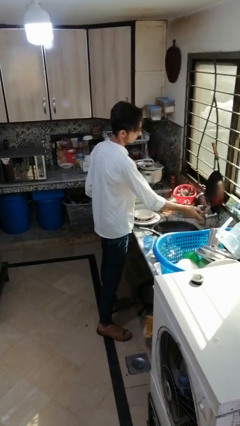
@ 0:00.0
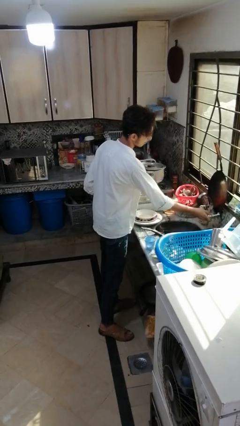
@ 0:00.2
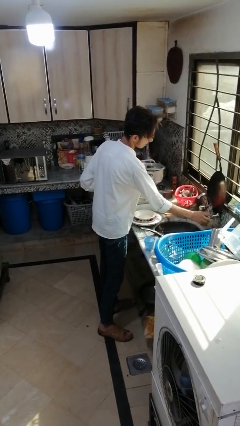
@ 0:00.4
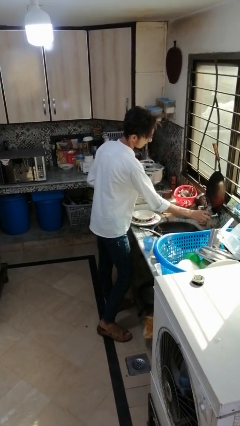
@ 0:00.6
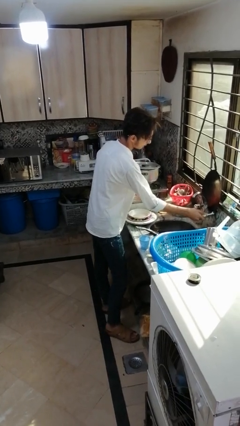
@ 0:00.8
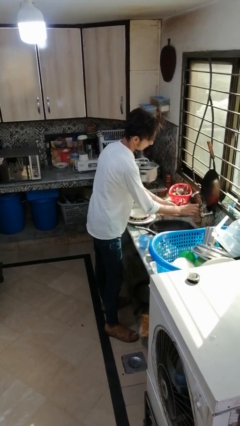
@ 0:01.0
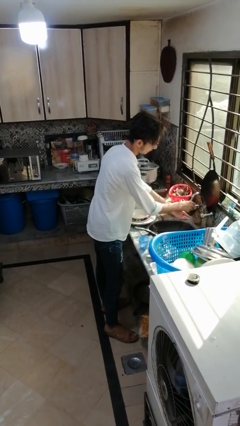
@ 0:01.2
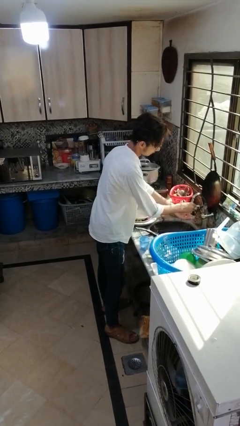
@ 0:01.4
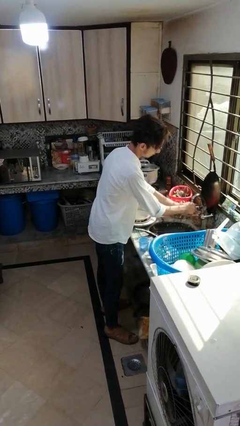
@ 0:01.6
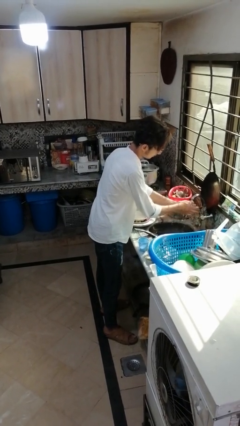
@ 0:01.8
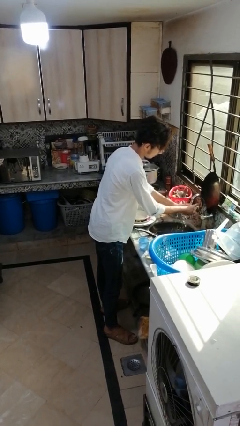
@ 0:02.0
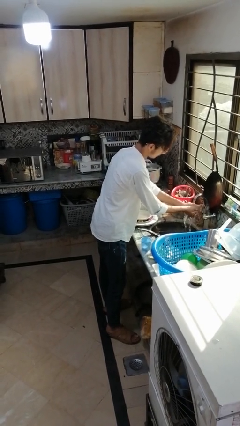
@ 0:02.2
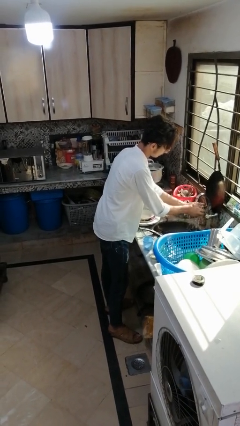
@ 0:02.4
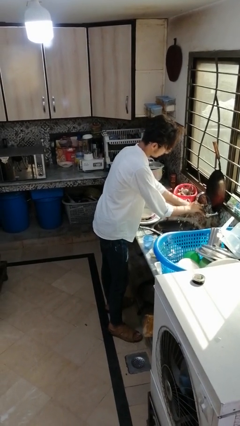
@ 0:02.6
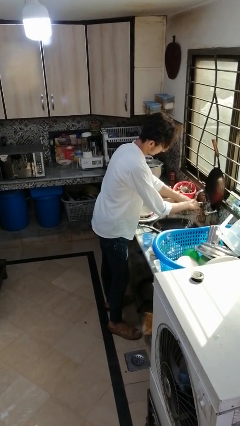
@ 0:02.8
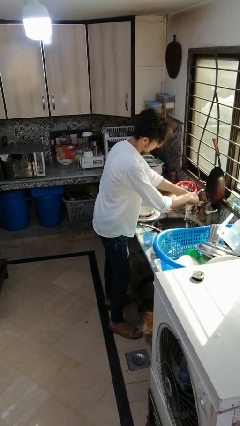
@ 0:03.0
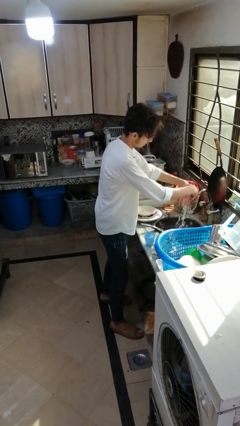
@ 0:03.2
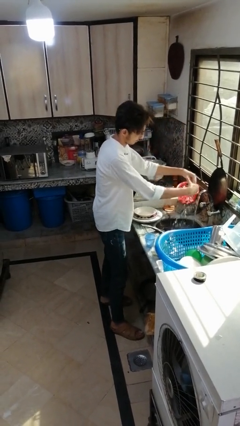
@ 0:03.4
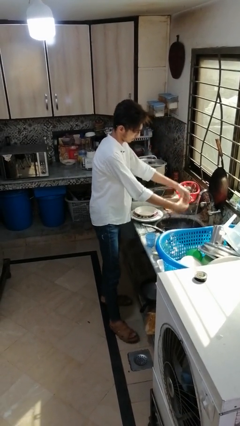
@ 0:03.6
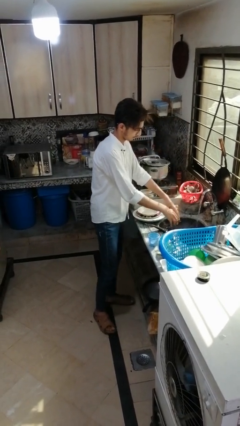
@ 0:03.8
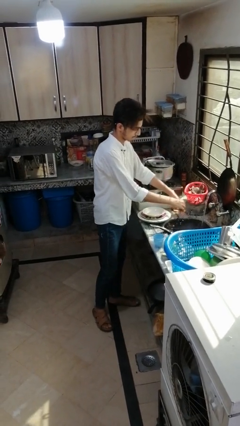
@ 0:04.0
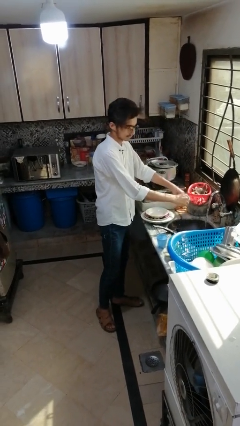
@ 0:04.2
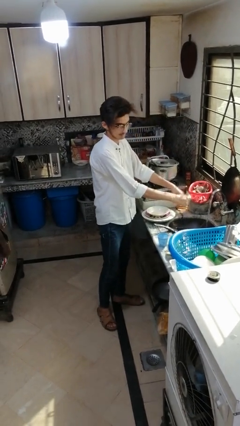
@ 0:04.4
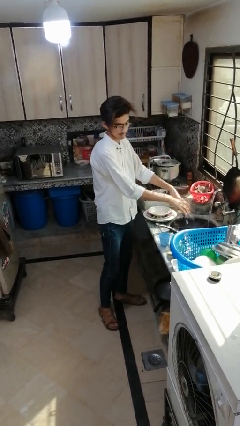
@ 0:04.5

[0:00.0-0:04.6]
person washes hands

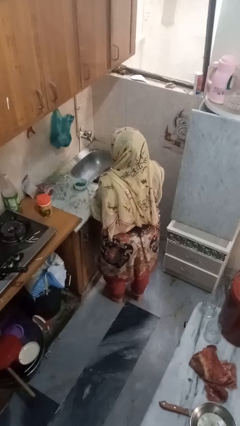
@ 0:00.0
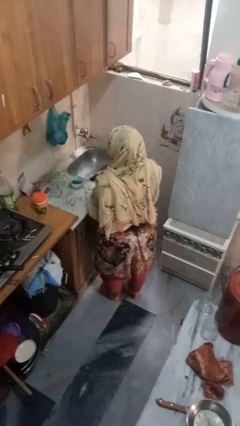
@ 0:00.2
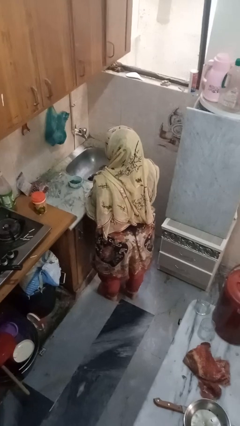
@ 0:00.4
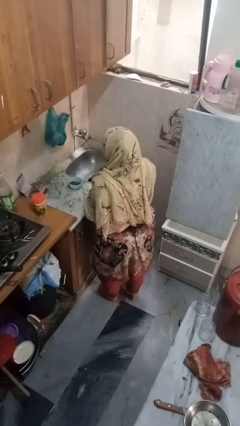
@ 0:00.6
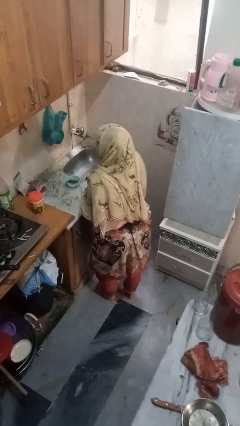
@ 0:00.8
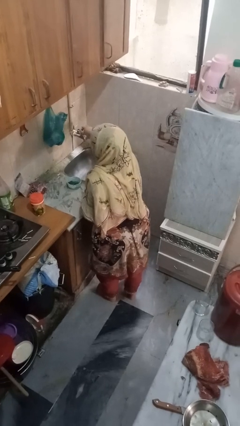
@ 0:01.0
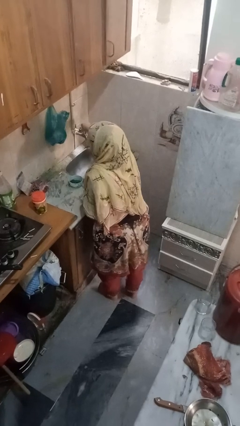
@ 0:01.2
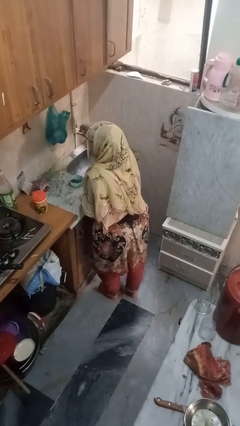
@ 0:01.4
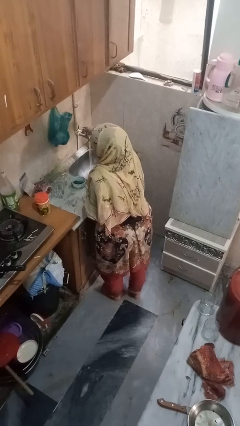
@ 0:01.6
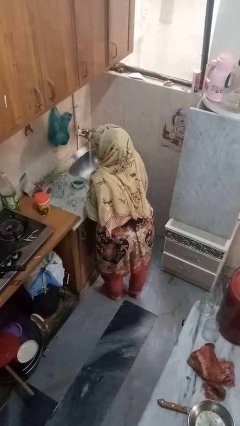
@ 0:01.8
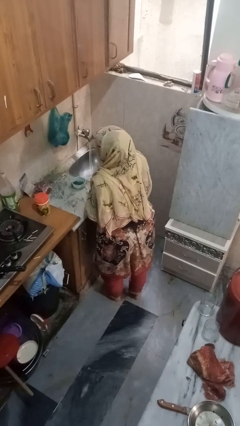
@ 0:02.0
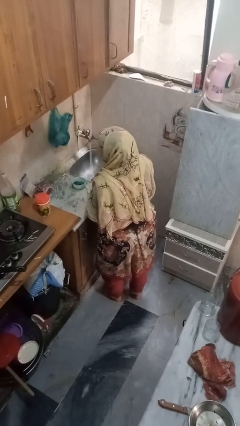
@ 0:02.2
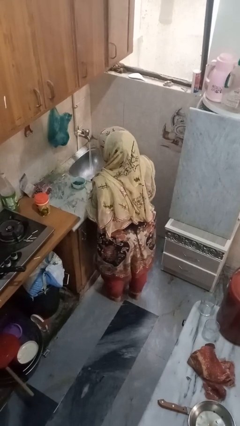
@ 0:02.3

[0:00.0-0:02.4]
person turns on faucet

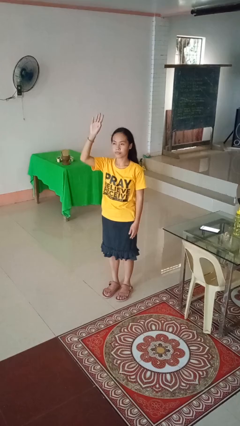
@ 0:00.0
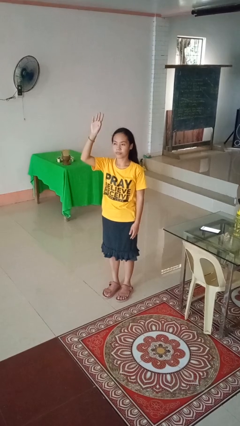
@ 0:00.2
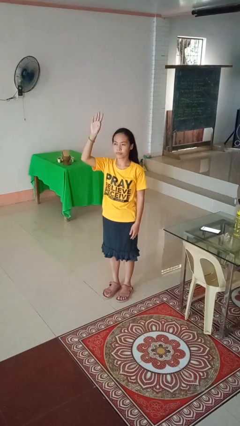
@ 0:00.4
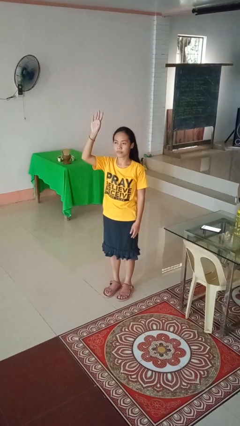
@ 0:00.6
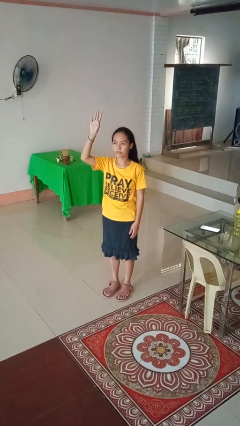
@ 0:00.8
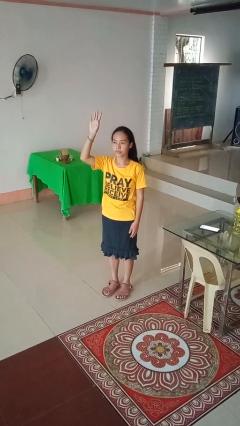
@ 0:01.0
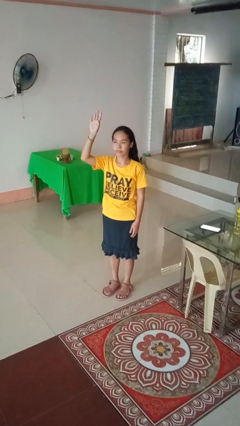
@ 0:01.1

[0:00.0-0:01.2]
person gestures raise hand

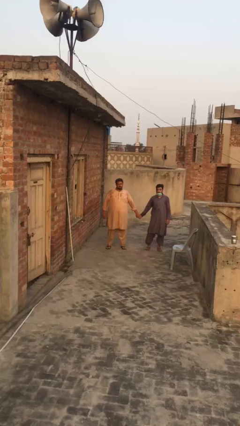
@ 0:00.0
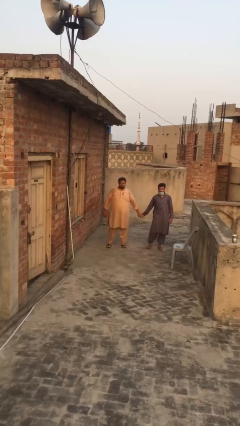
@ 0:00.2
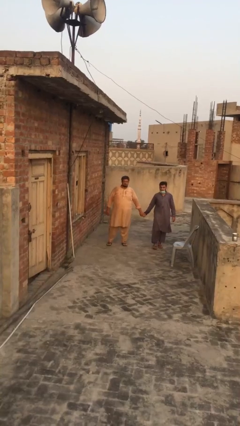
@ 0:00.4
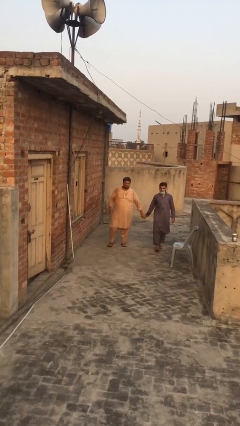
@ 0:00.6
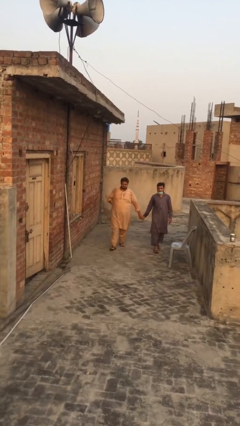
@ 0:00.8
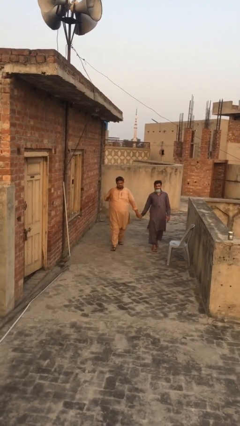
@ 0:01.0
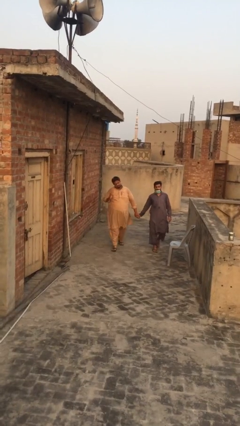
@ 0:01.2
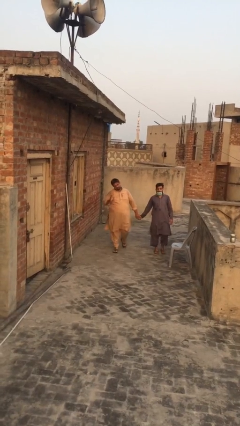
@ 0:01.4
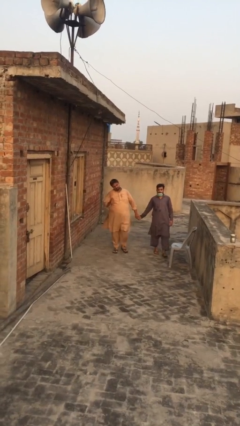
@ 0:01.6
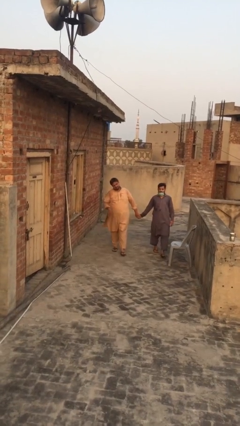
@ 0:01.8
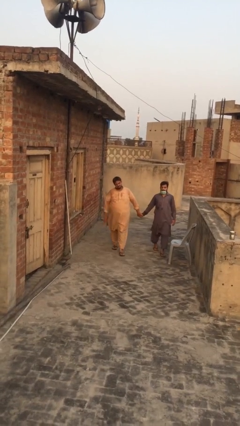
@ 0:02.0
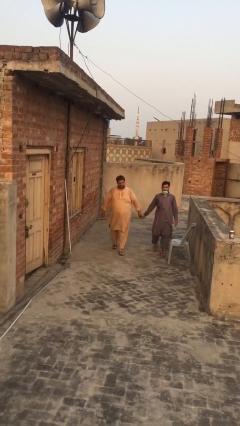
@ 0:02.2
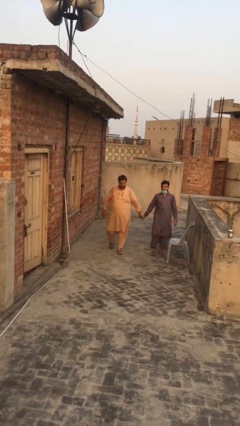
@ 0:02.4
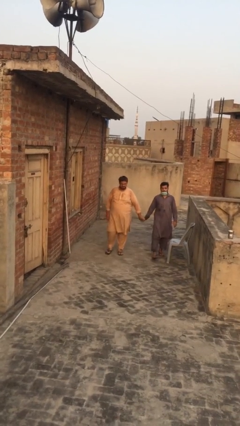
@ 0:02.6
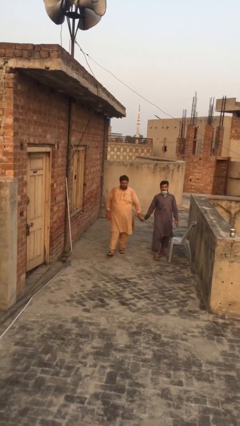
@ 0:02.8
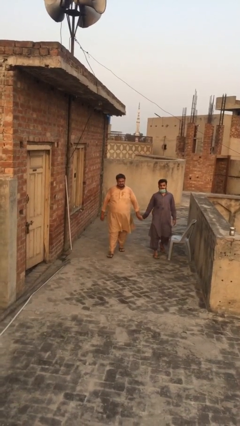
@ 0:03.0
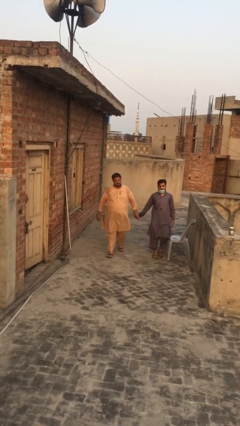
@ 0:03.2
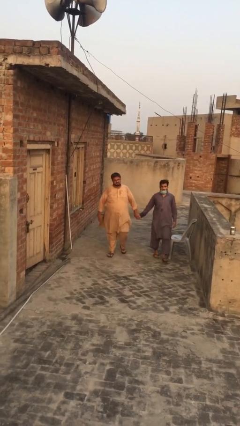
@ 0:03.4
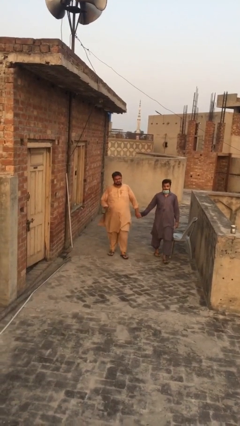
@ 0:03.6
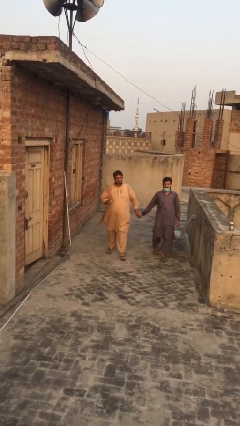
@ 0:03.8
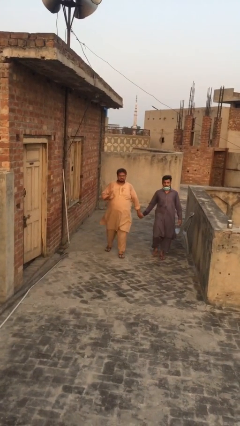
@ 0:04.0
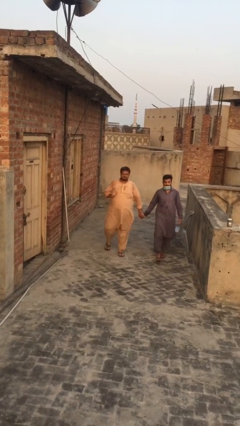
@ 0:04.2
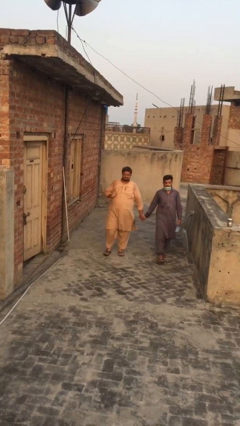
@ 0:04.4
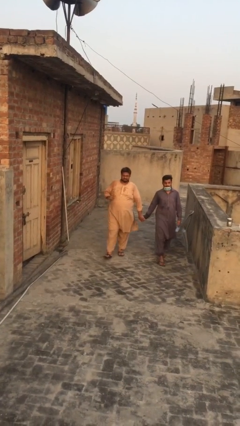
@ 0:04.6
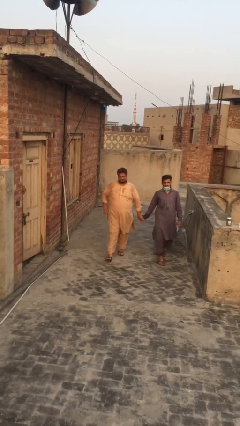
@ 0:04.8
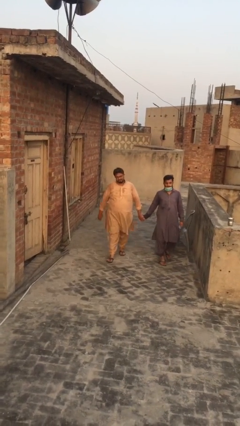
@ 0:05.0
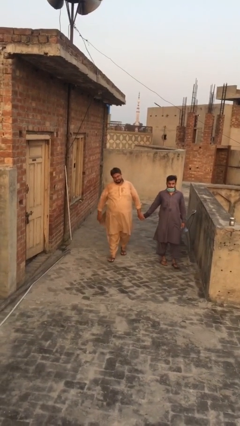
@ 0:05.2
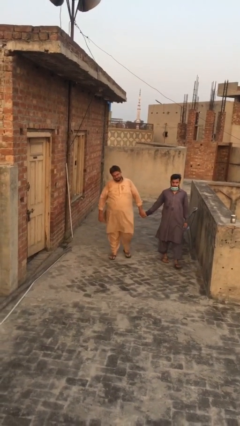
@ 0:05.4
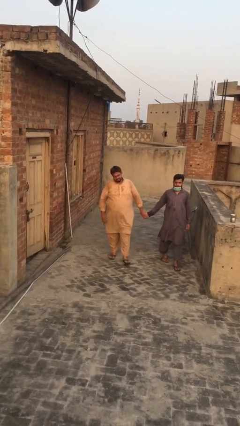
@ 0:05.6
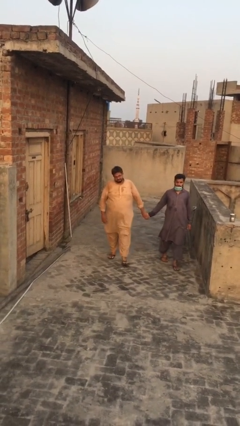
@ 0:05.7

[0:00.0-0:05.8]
person holds hand

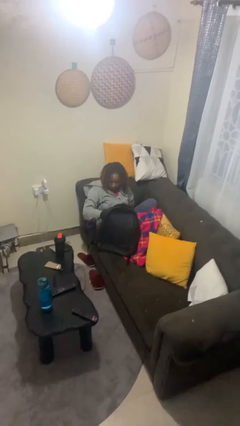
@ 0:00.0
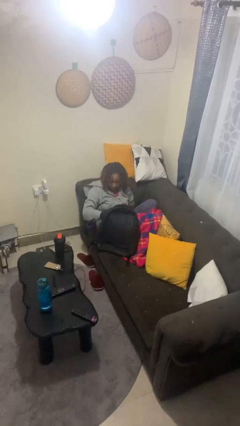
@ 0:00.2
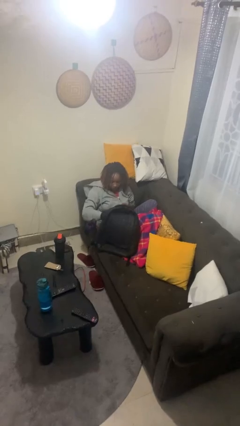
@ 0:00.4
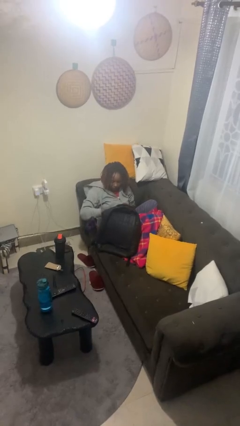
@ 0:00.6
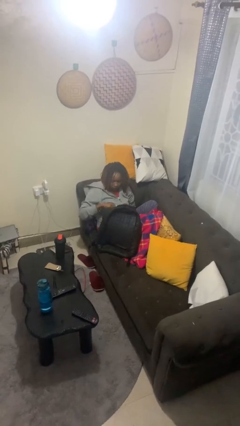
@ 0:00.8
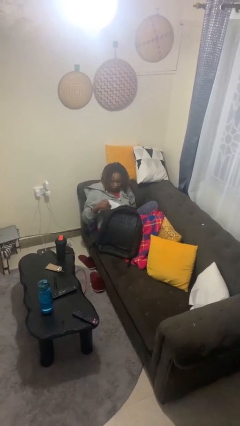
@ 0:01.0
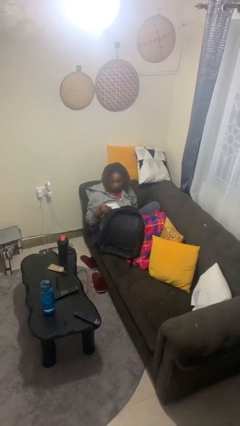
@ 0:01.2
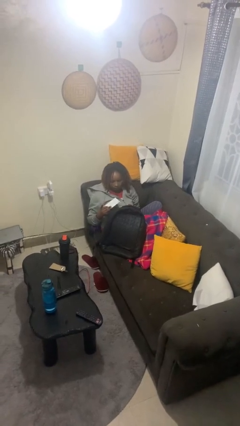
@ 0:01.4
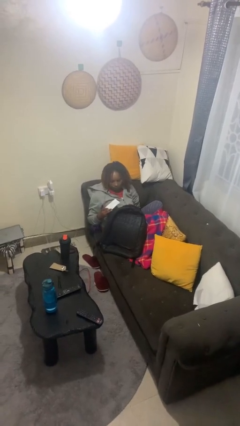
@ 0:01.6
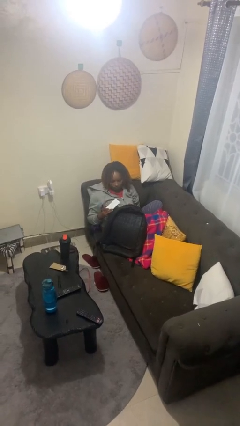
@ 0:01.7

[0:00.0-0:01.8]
person takes object from backpack

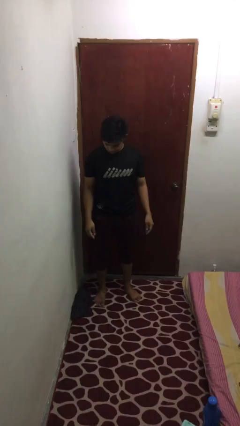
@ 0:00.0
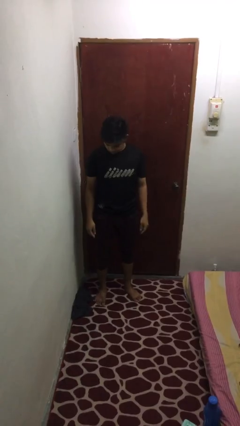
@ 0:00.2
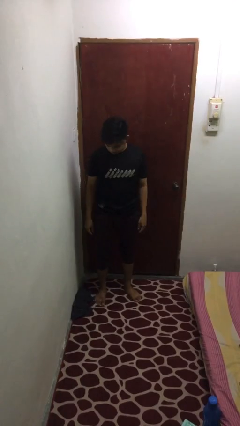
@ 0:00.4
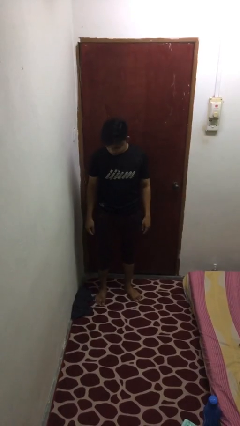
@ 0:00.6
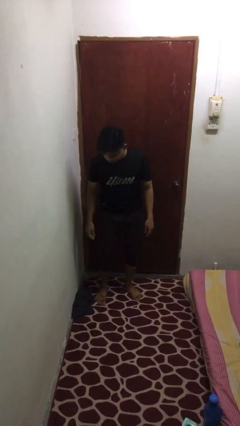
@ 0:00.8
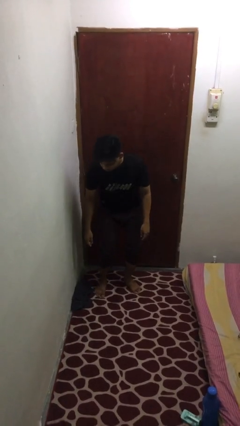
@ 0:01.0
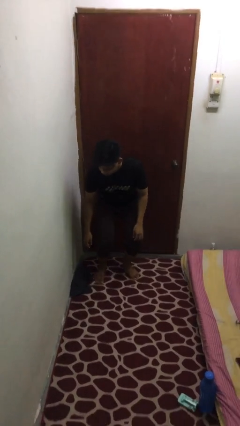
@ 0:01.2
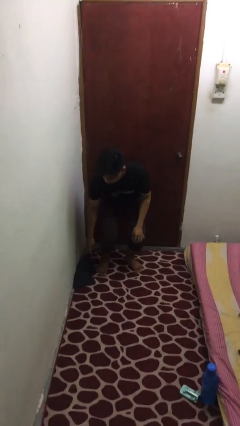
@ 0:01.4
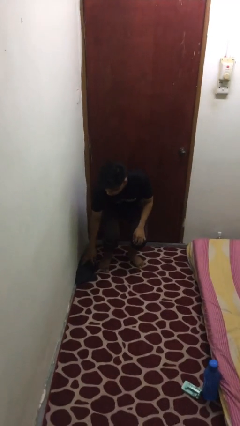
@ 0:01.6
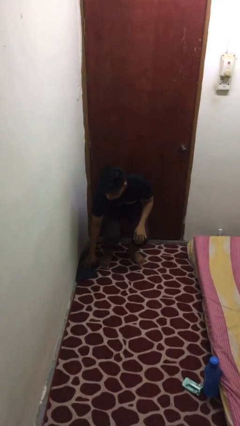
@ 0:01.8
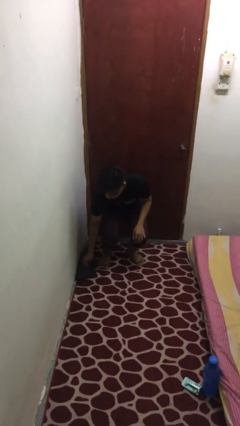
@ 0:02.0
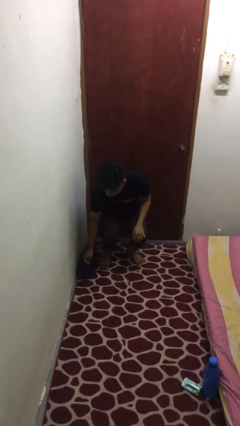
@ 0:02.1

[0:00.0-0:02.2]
person picks up object from floor
